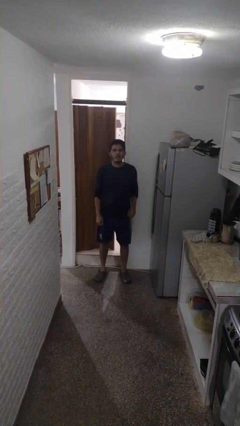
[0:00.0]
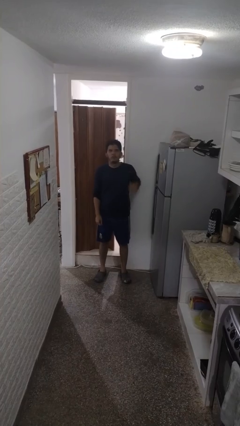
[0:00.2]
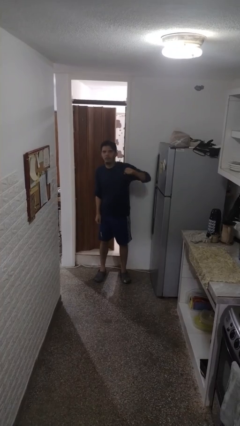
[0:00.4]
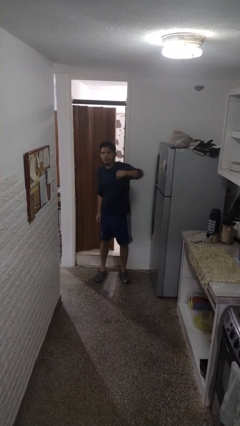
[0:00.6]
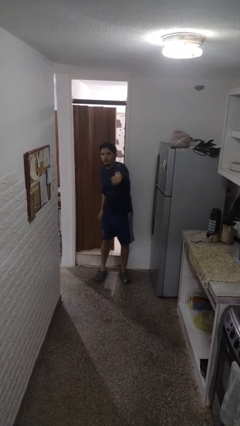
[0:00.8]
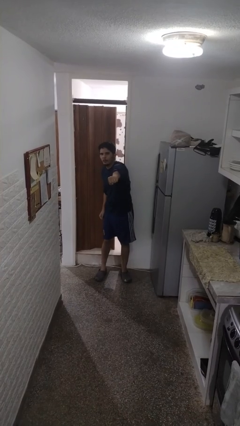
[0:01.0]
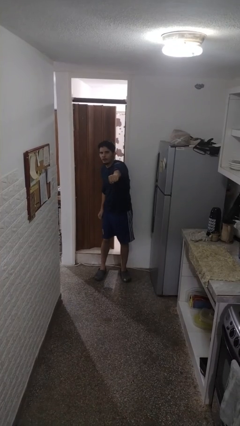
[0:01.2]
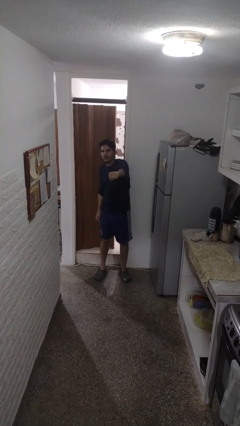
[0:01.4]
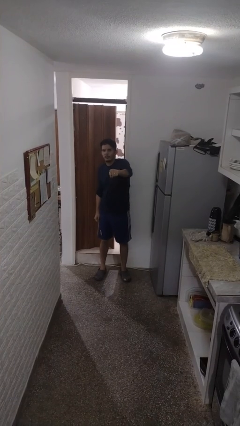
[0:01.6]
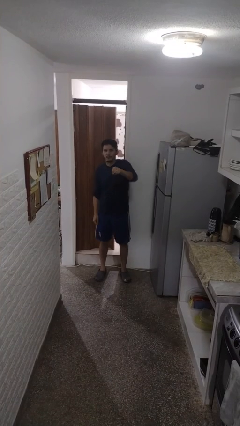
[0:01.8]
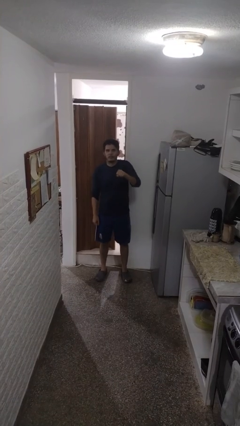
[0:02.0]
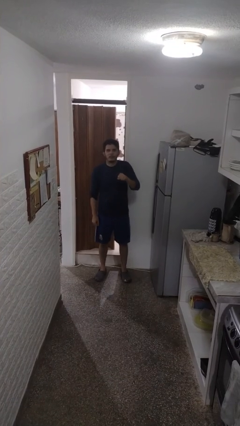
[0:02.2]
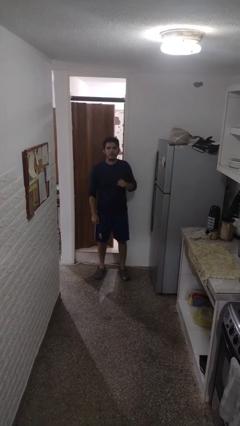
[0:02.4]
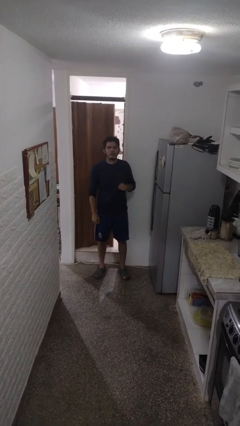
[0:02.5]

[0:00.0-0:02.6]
person punches

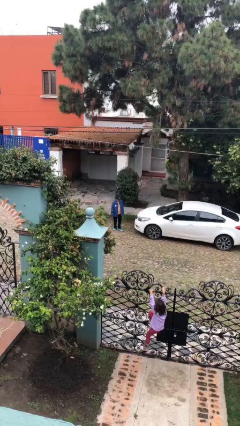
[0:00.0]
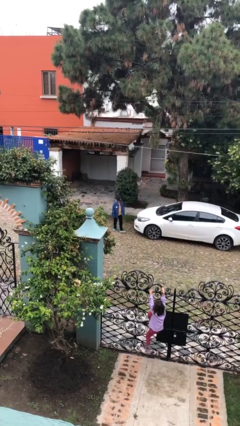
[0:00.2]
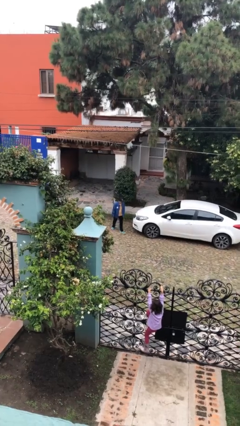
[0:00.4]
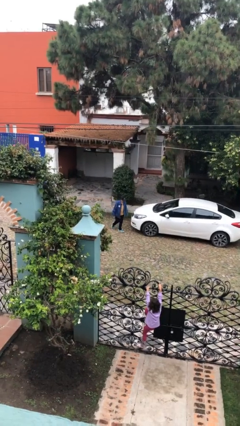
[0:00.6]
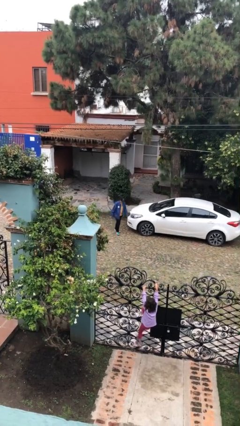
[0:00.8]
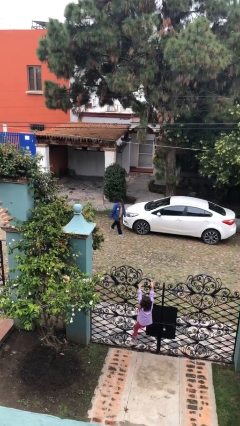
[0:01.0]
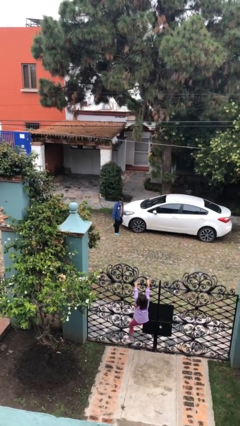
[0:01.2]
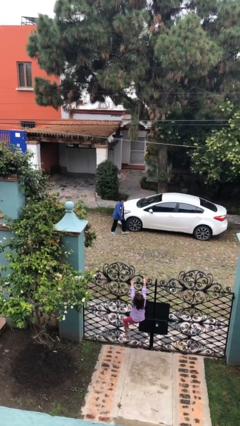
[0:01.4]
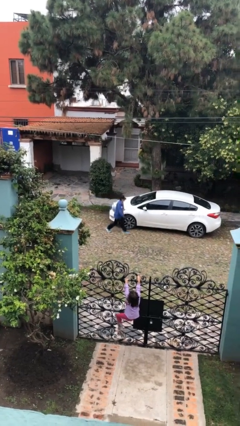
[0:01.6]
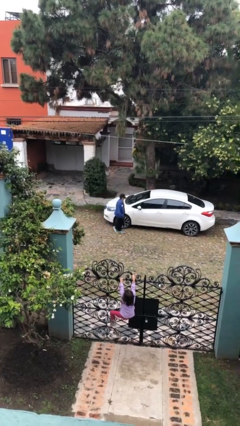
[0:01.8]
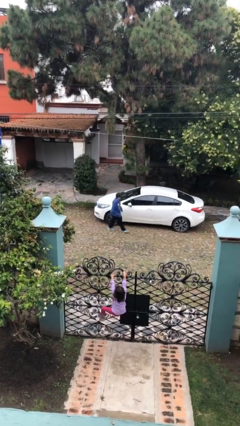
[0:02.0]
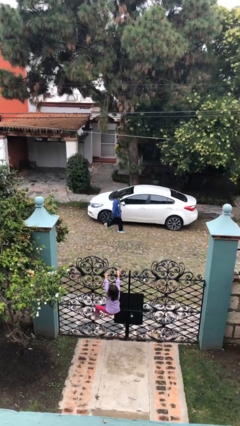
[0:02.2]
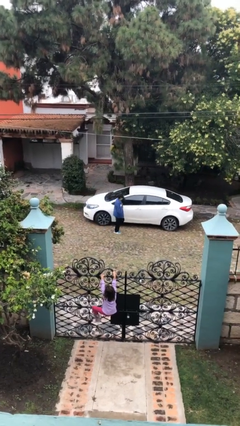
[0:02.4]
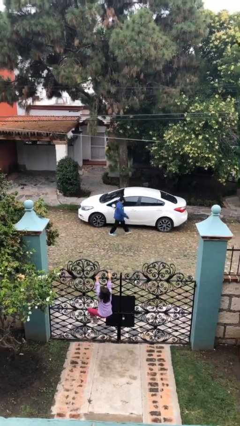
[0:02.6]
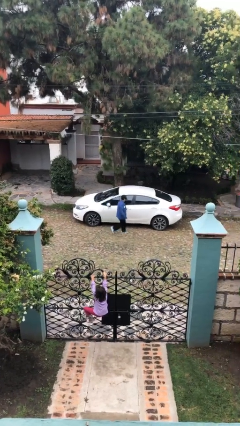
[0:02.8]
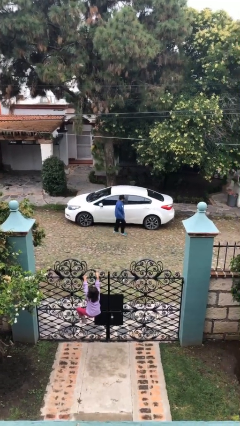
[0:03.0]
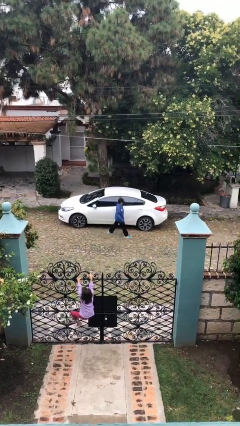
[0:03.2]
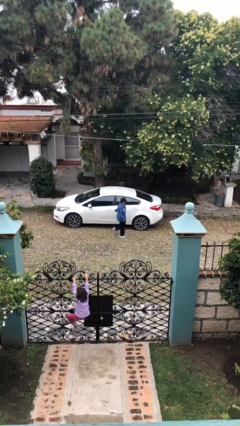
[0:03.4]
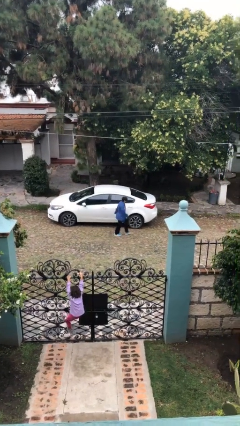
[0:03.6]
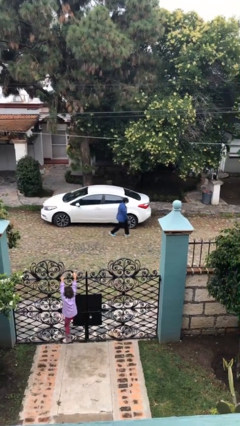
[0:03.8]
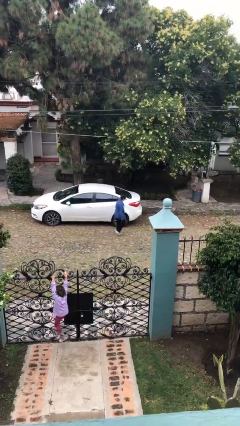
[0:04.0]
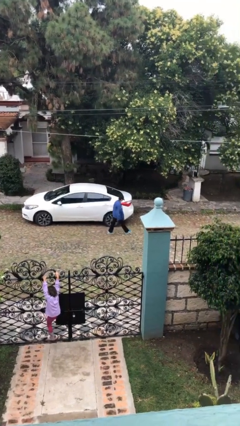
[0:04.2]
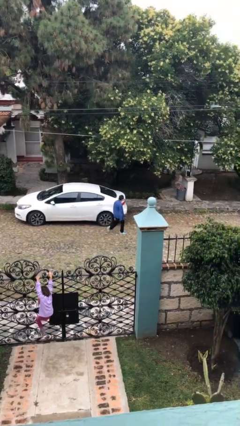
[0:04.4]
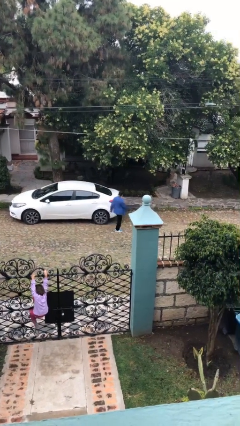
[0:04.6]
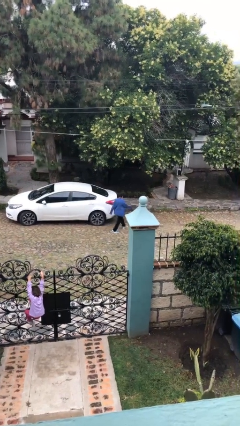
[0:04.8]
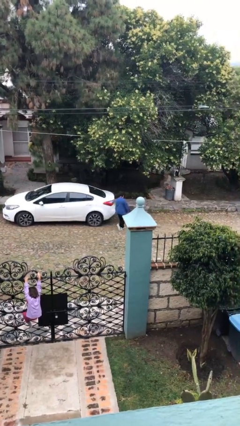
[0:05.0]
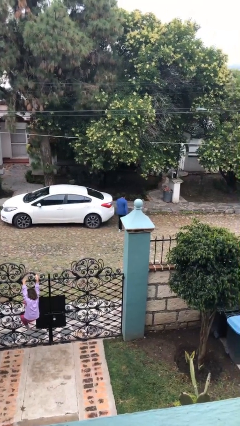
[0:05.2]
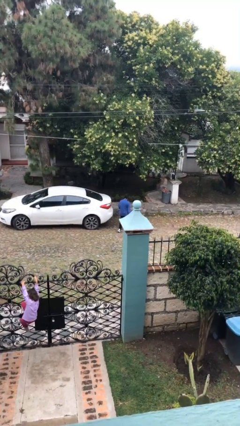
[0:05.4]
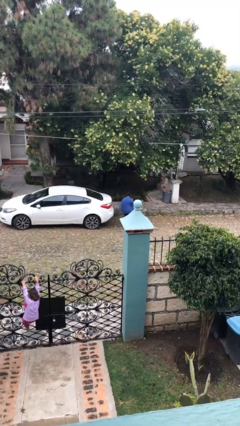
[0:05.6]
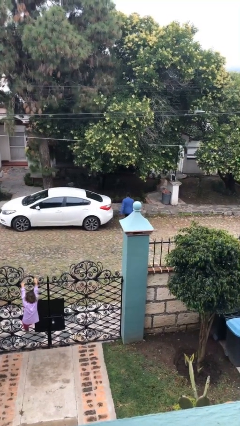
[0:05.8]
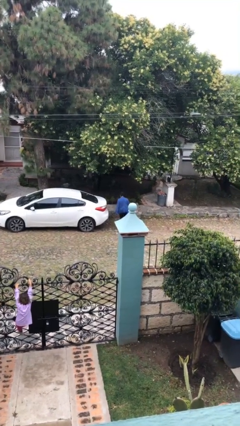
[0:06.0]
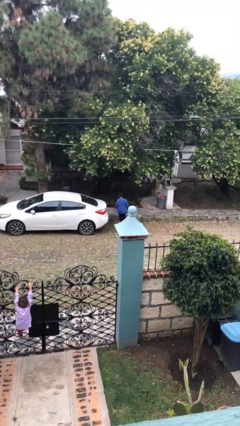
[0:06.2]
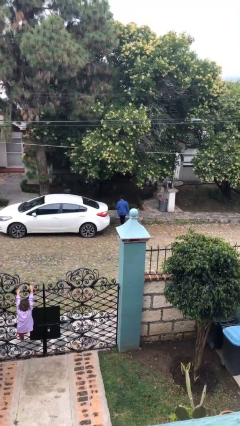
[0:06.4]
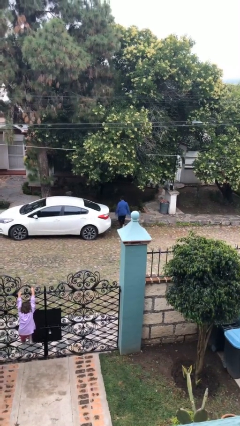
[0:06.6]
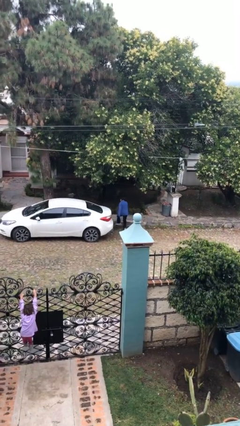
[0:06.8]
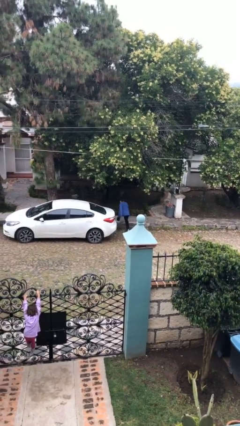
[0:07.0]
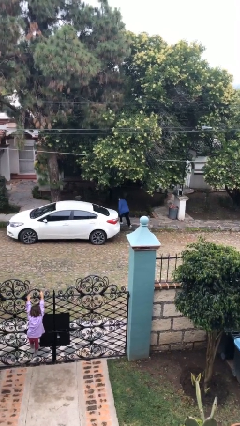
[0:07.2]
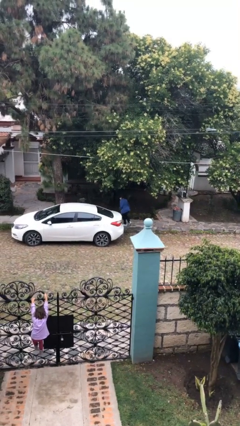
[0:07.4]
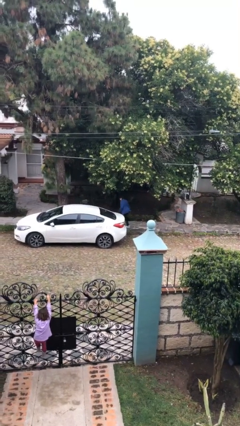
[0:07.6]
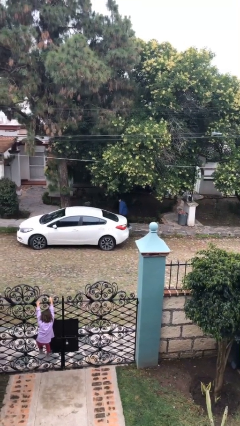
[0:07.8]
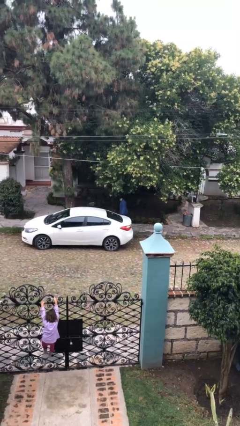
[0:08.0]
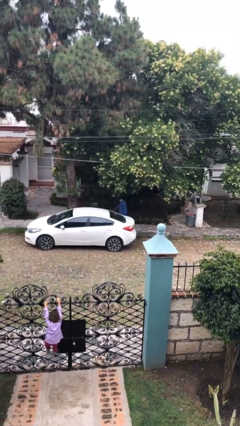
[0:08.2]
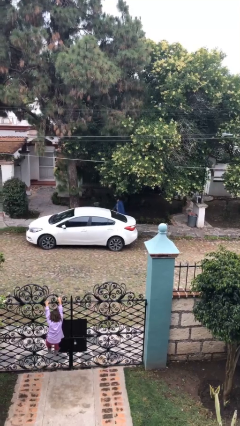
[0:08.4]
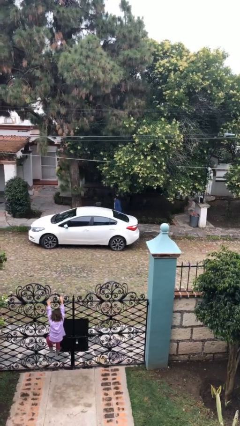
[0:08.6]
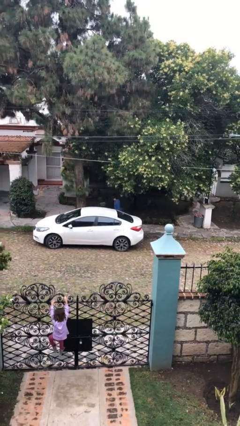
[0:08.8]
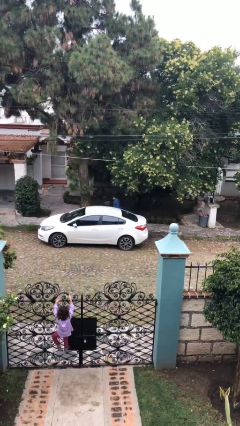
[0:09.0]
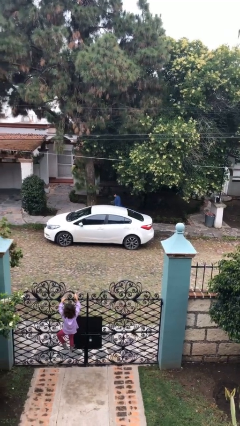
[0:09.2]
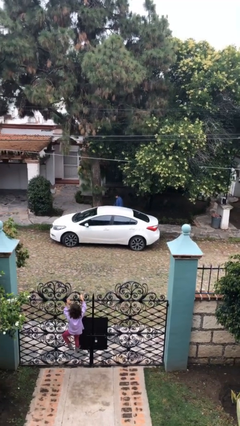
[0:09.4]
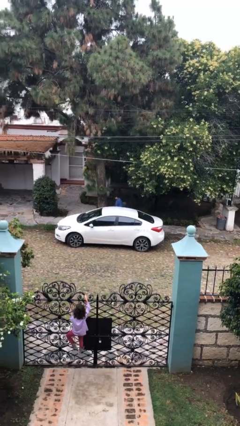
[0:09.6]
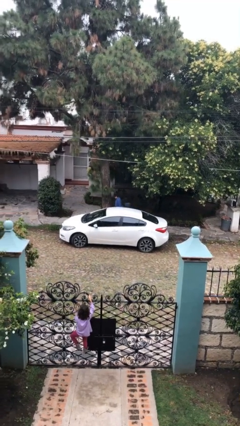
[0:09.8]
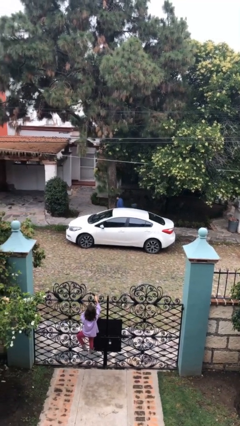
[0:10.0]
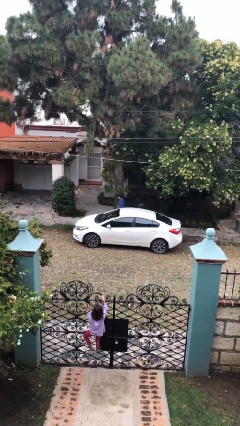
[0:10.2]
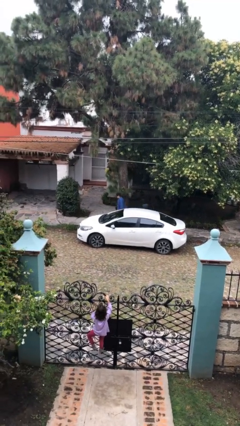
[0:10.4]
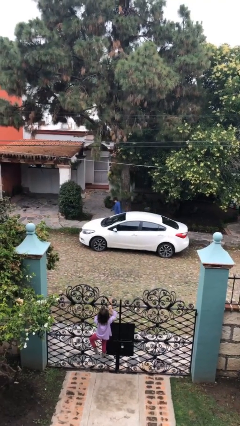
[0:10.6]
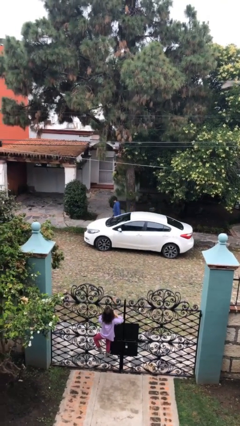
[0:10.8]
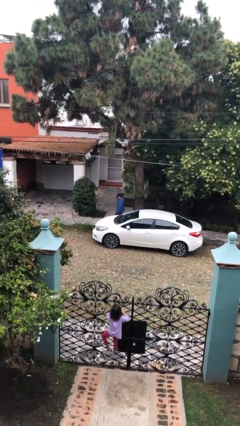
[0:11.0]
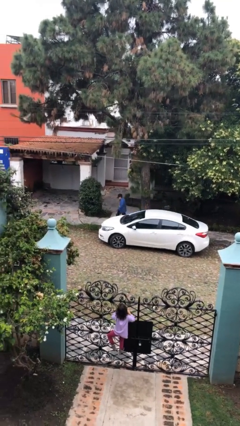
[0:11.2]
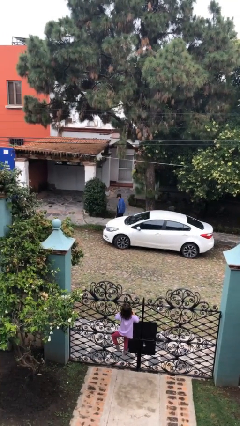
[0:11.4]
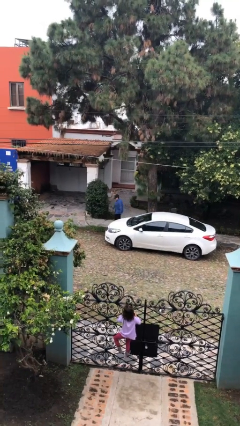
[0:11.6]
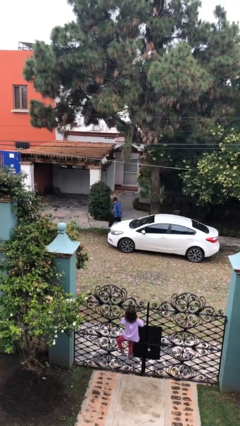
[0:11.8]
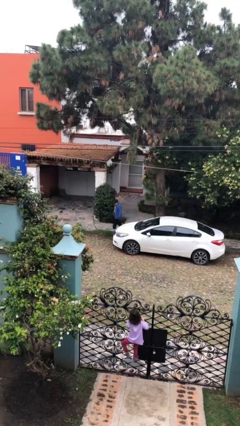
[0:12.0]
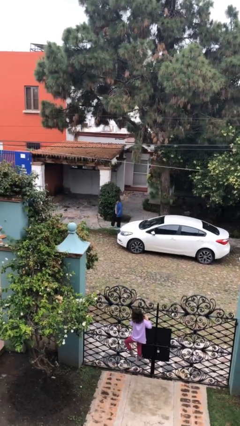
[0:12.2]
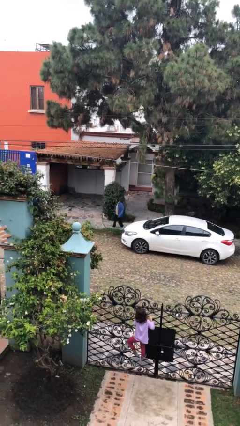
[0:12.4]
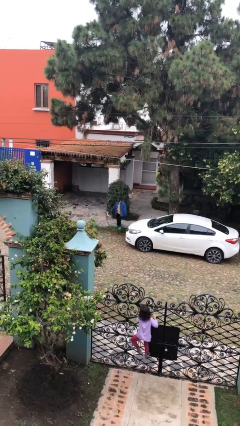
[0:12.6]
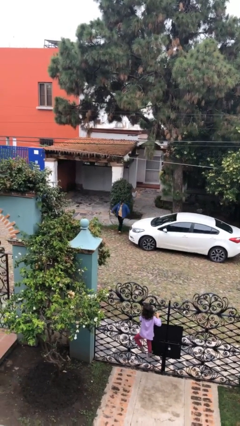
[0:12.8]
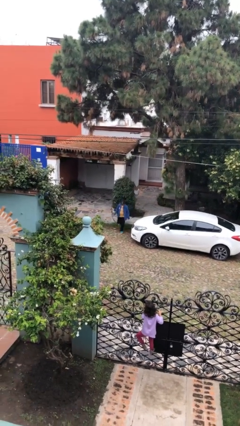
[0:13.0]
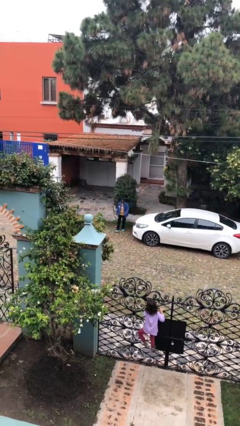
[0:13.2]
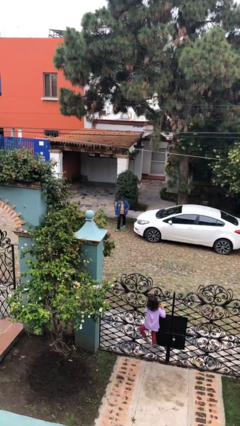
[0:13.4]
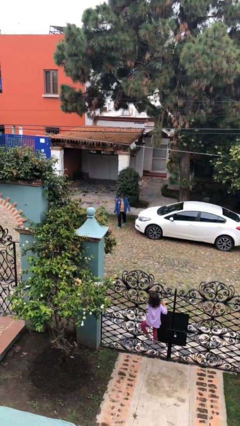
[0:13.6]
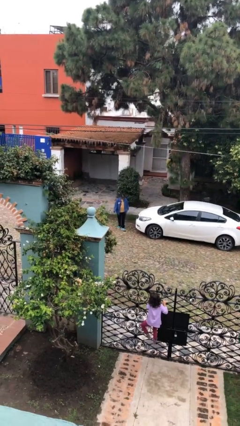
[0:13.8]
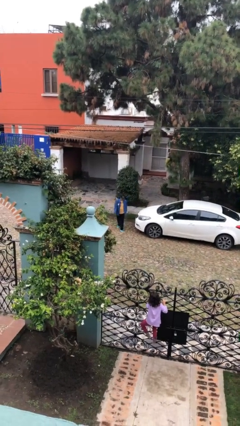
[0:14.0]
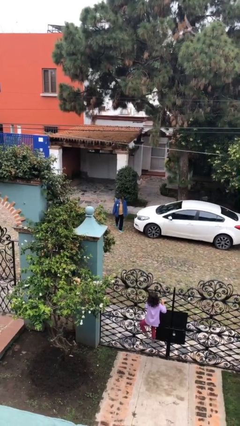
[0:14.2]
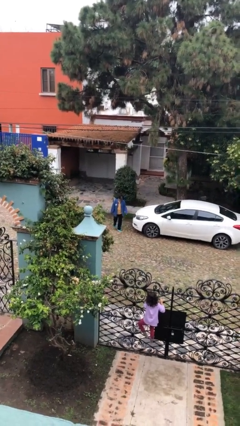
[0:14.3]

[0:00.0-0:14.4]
person walks around car

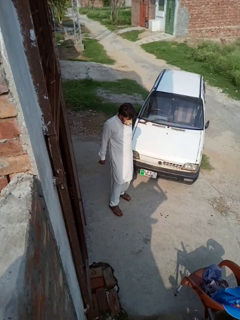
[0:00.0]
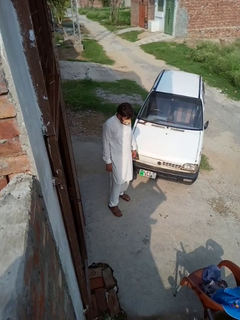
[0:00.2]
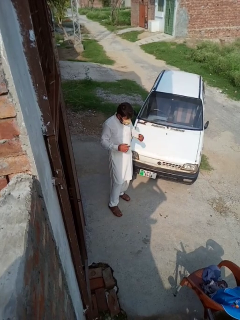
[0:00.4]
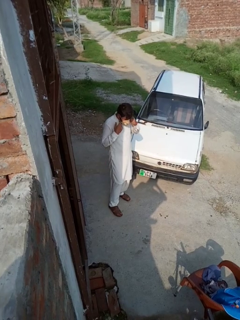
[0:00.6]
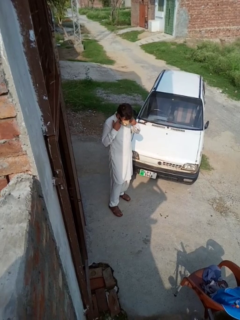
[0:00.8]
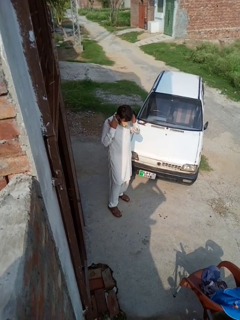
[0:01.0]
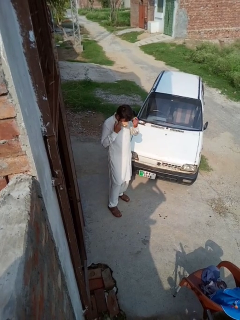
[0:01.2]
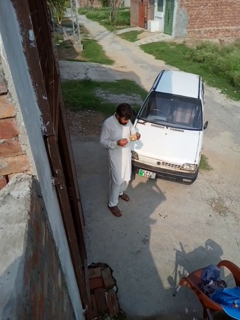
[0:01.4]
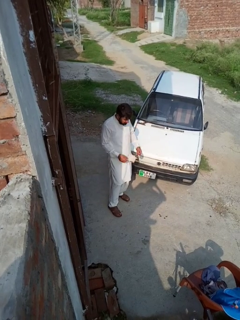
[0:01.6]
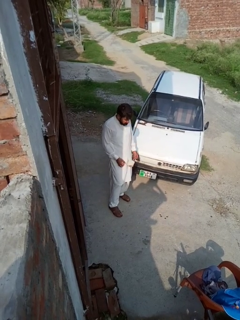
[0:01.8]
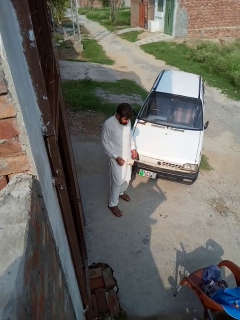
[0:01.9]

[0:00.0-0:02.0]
person takes off facemask
